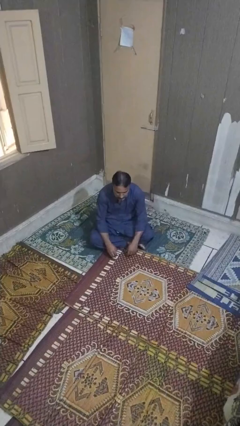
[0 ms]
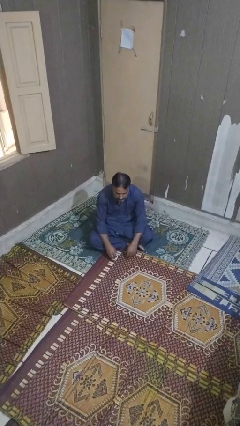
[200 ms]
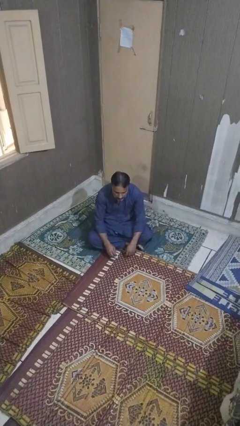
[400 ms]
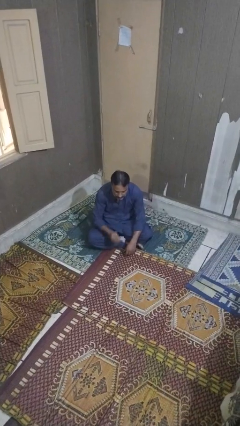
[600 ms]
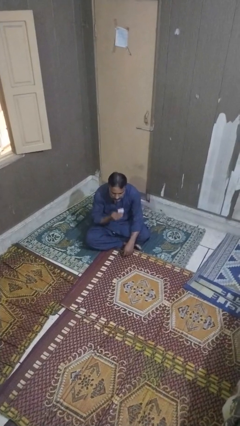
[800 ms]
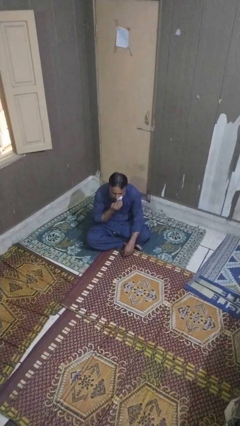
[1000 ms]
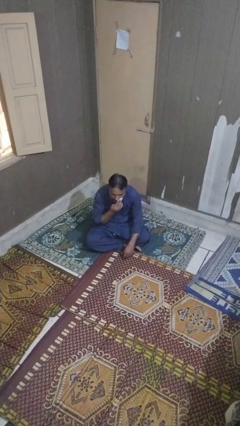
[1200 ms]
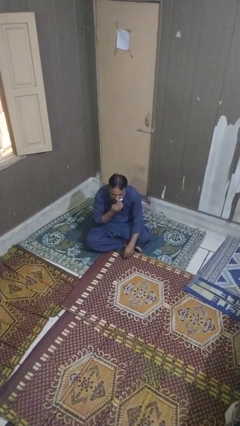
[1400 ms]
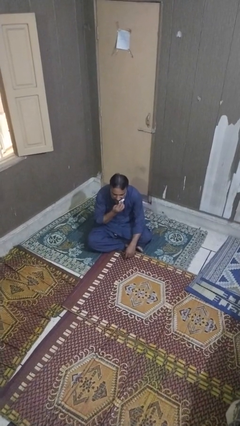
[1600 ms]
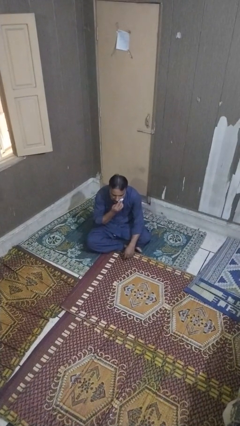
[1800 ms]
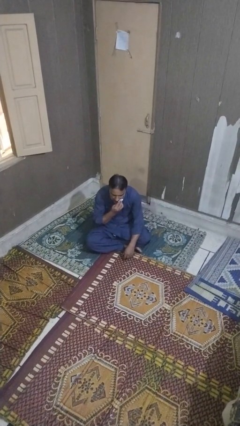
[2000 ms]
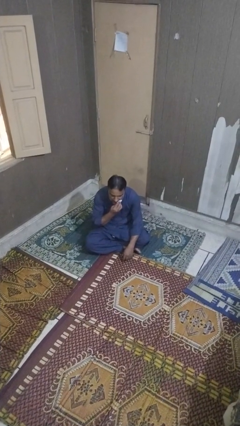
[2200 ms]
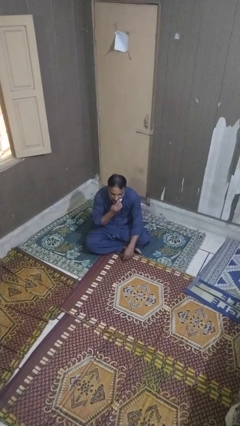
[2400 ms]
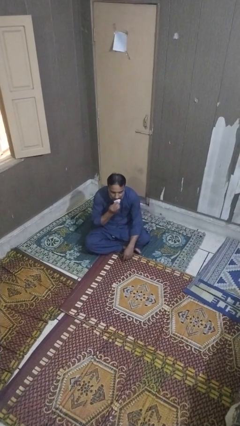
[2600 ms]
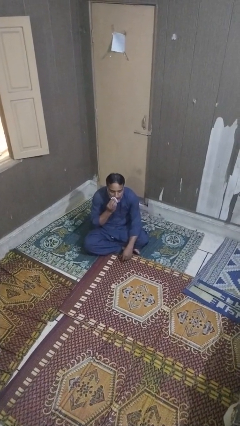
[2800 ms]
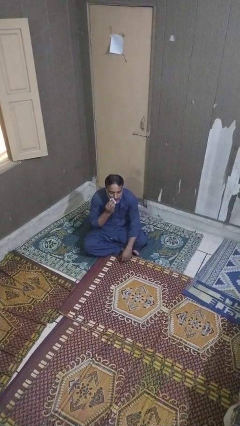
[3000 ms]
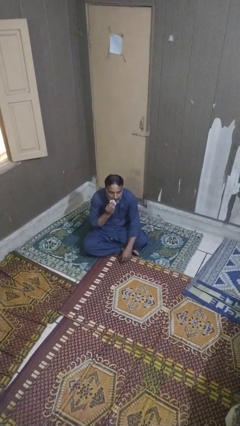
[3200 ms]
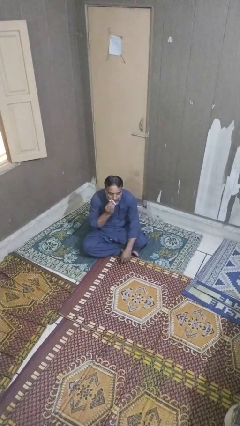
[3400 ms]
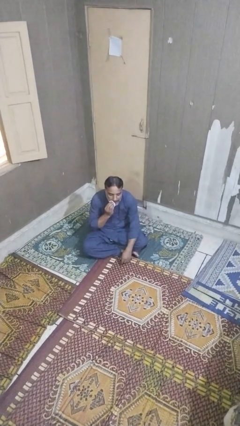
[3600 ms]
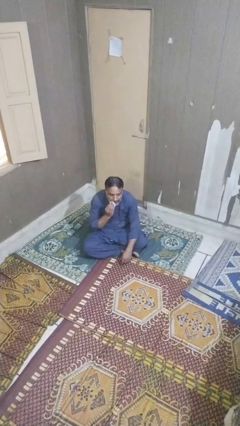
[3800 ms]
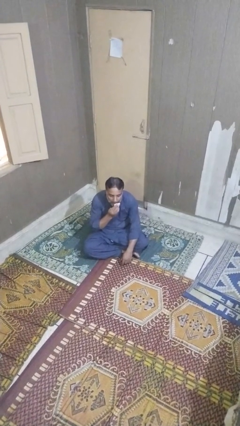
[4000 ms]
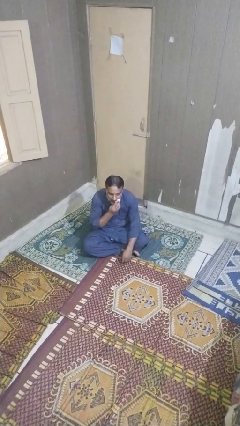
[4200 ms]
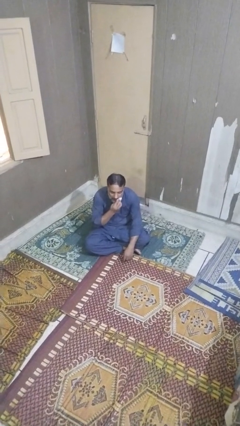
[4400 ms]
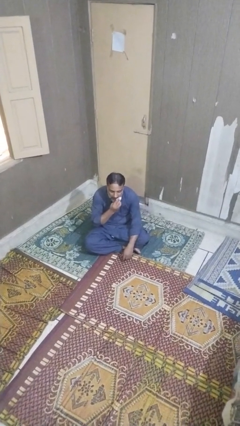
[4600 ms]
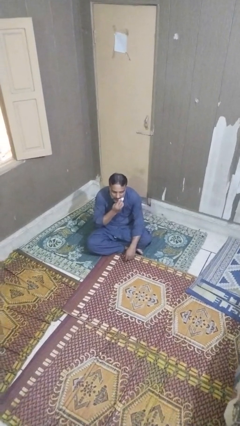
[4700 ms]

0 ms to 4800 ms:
person wipes mouth with napkin

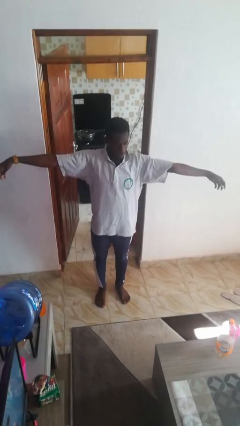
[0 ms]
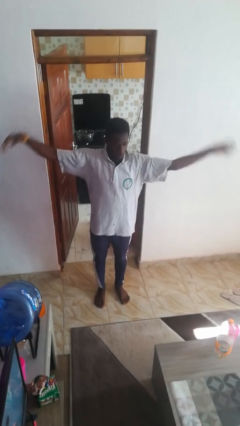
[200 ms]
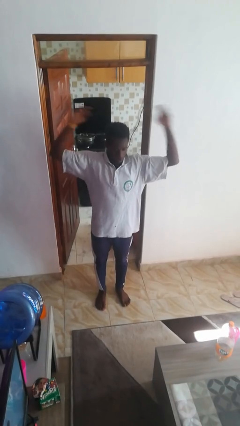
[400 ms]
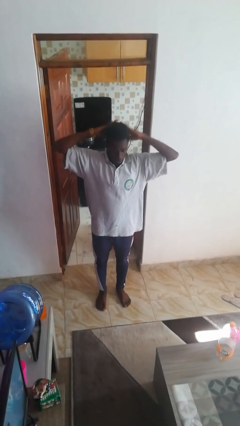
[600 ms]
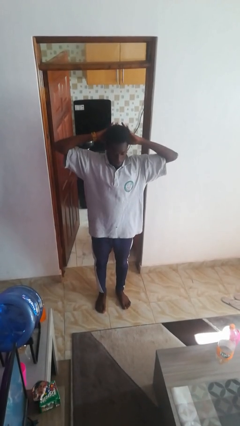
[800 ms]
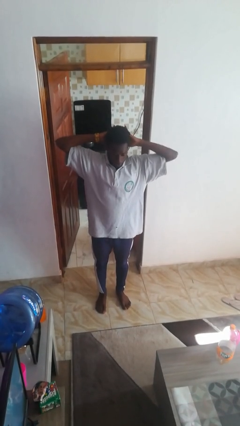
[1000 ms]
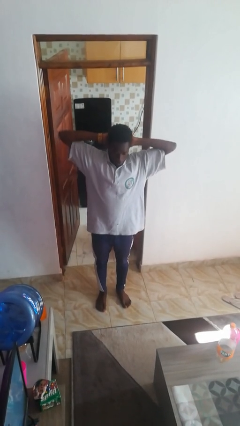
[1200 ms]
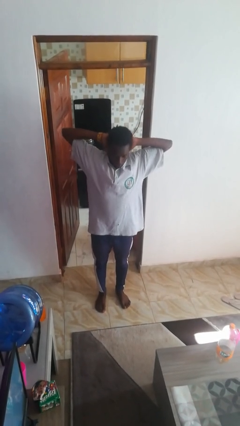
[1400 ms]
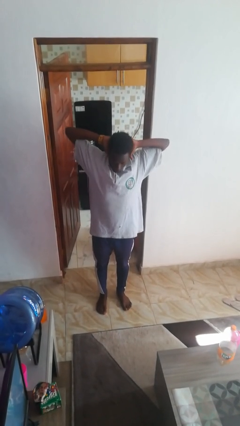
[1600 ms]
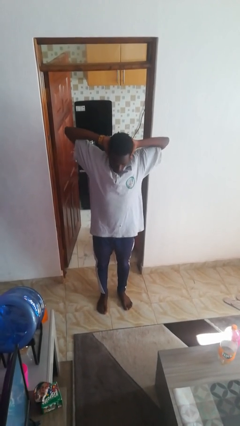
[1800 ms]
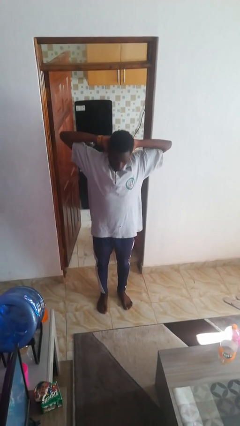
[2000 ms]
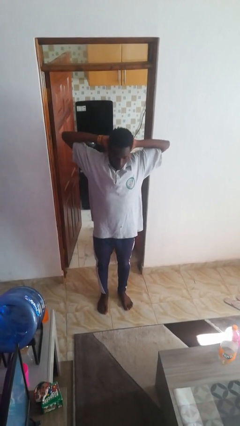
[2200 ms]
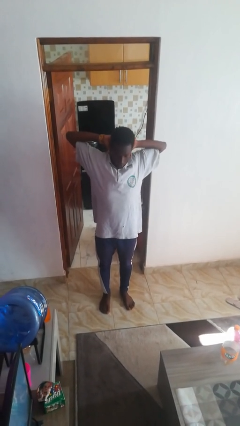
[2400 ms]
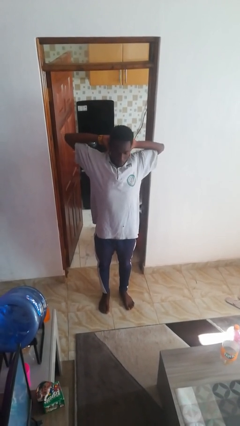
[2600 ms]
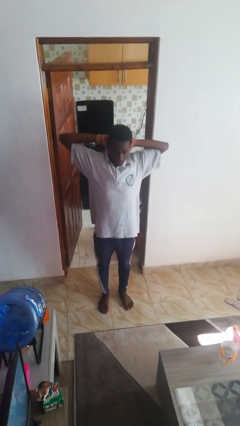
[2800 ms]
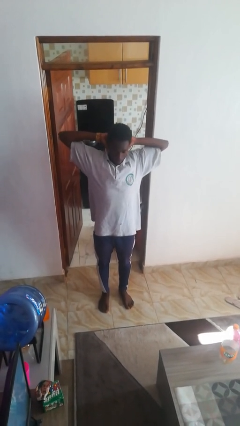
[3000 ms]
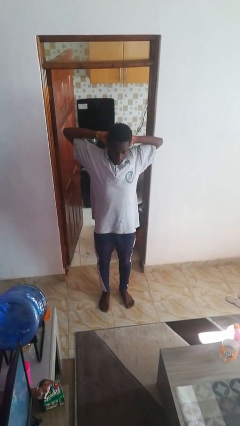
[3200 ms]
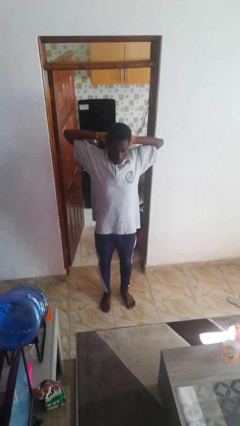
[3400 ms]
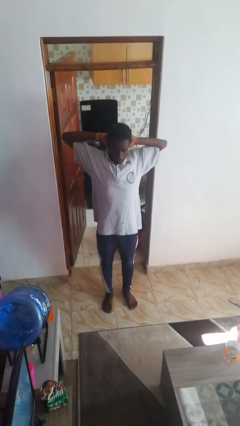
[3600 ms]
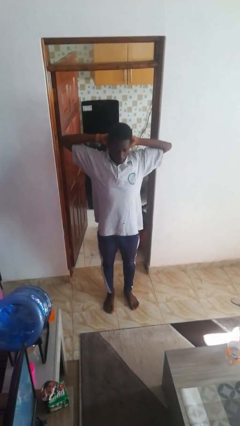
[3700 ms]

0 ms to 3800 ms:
person stretches arms over head

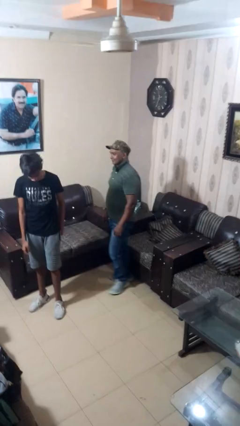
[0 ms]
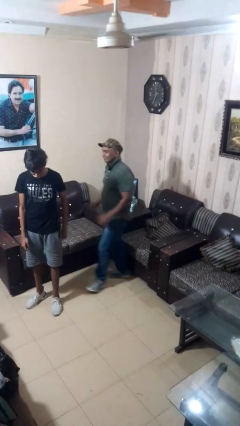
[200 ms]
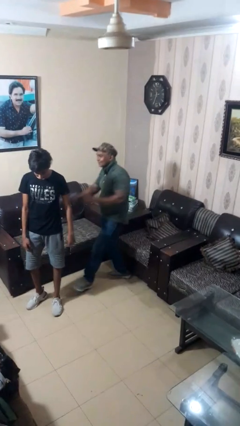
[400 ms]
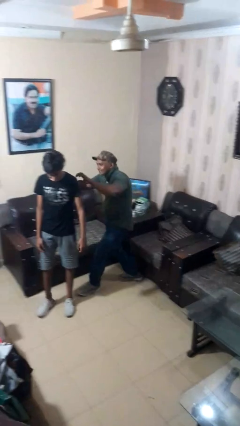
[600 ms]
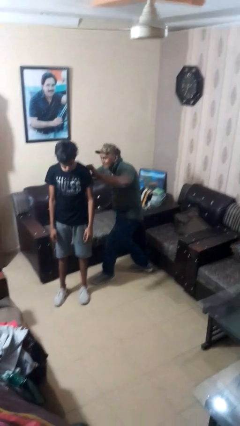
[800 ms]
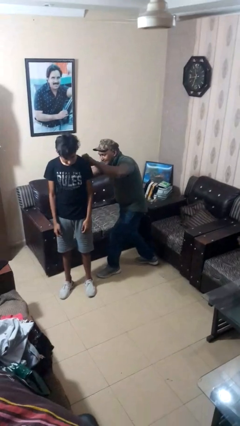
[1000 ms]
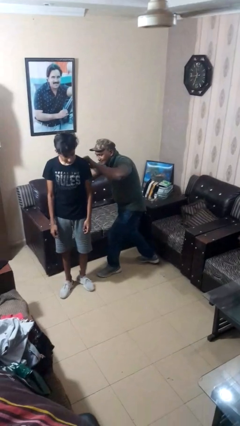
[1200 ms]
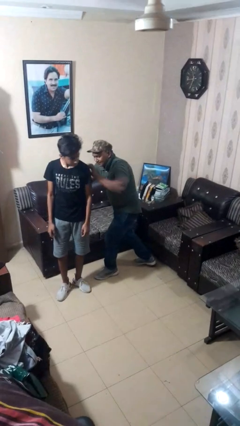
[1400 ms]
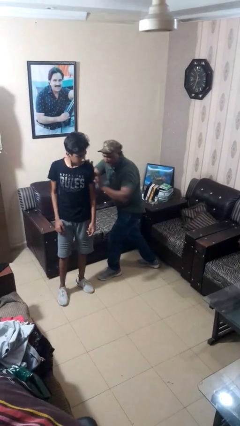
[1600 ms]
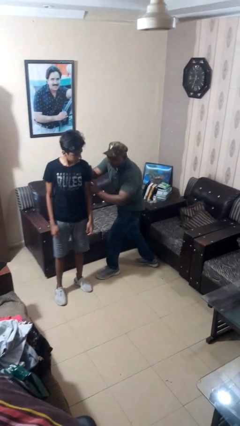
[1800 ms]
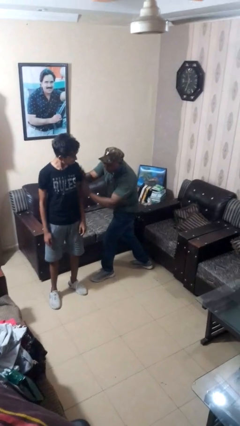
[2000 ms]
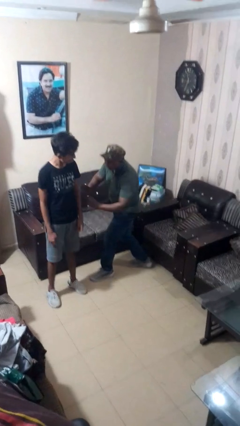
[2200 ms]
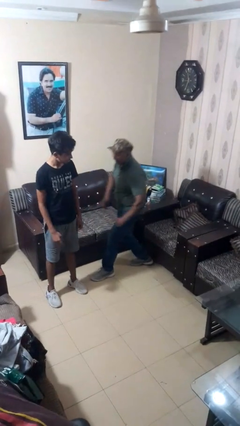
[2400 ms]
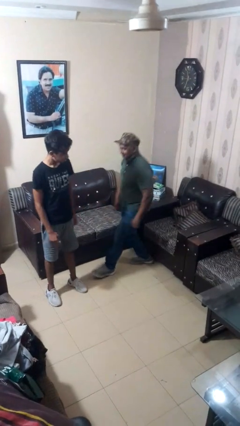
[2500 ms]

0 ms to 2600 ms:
person tickles person

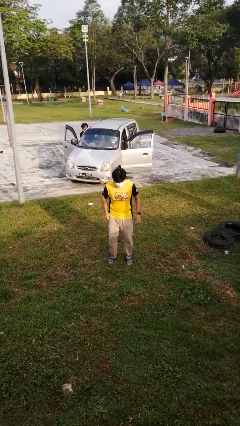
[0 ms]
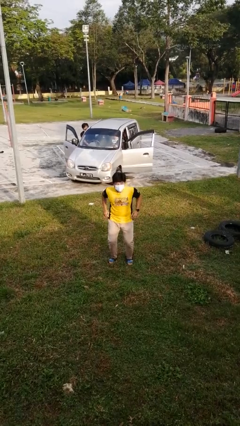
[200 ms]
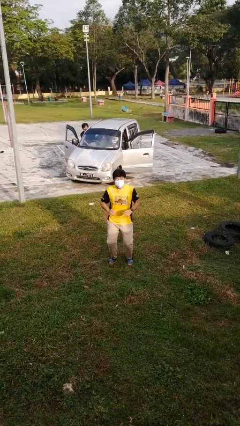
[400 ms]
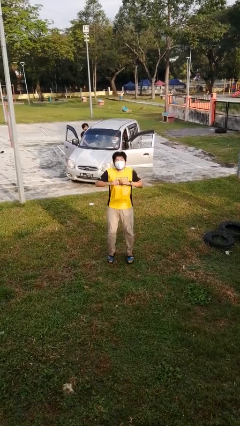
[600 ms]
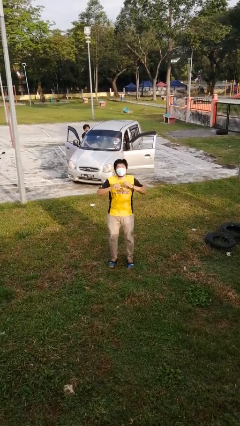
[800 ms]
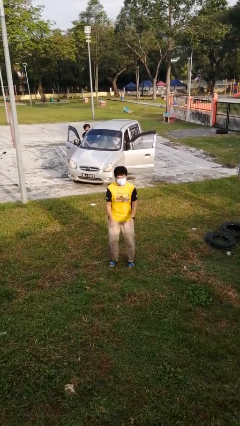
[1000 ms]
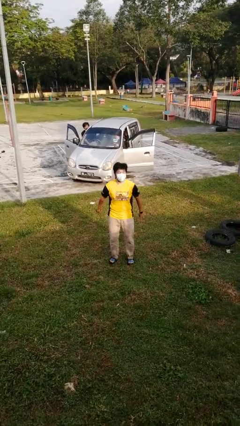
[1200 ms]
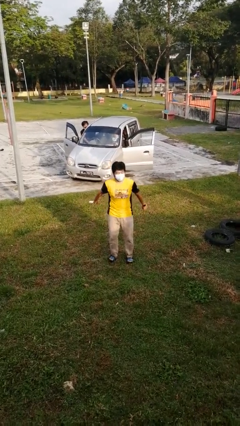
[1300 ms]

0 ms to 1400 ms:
person jumps

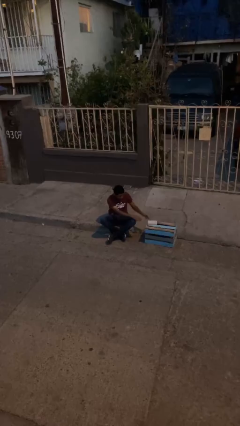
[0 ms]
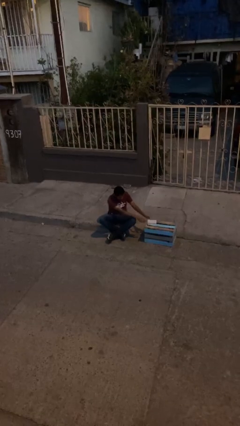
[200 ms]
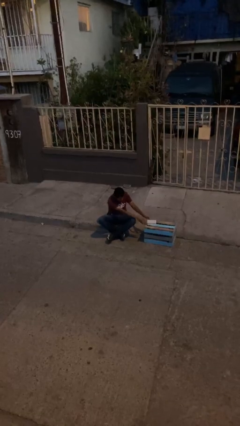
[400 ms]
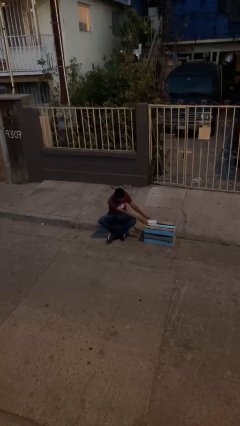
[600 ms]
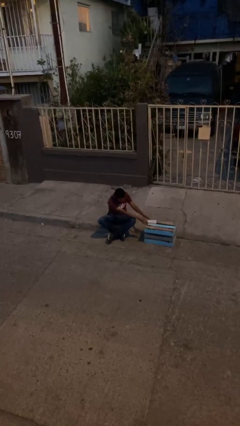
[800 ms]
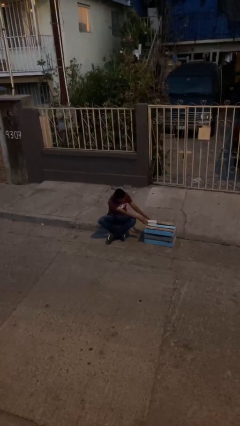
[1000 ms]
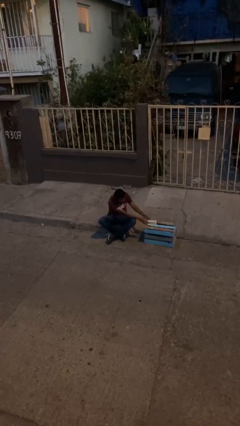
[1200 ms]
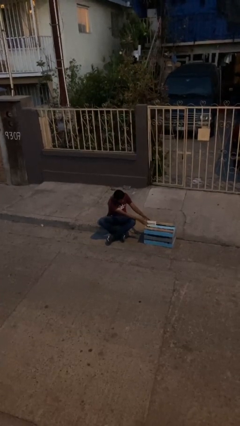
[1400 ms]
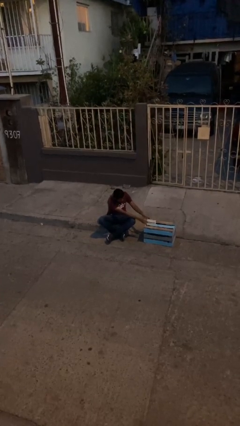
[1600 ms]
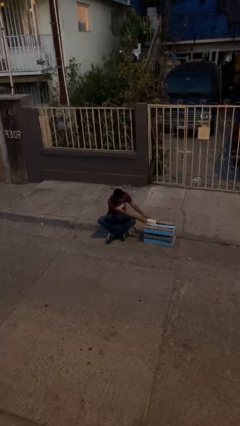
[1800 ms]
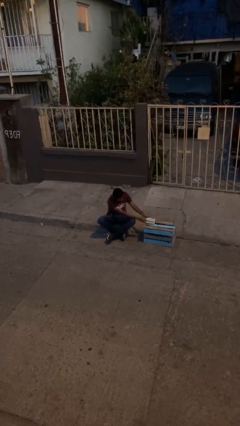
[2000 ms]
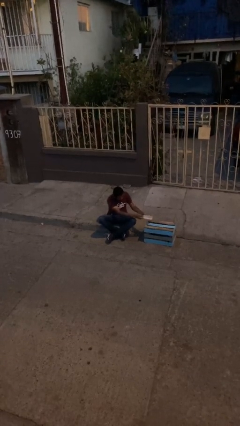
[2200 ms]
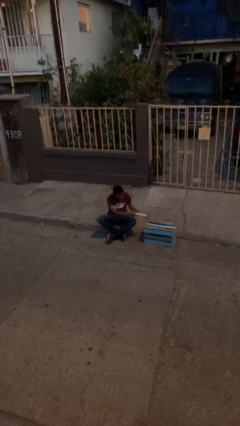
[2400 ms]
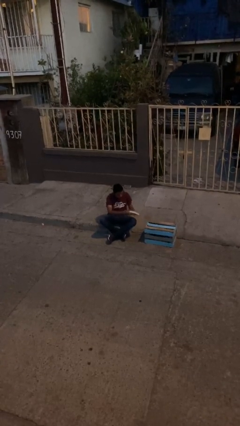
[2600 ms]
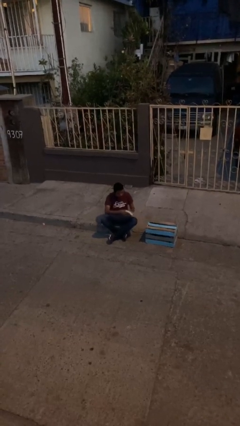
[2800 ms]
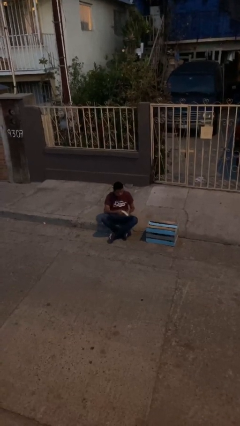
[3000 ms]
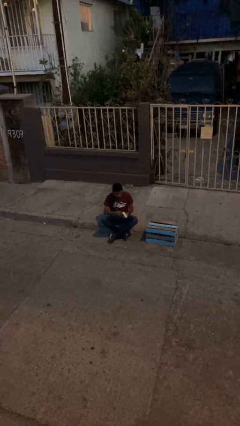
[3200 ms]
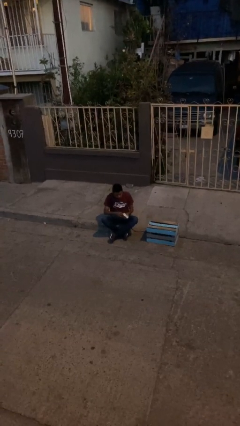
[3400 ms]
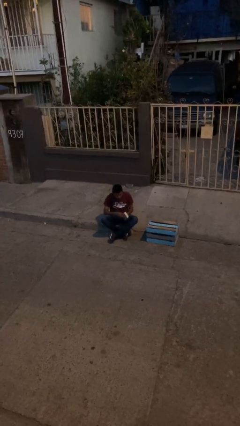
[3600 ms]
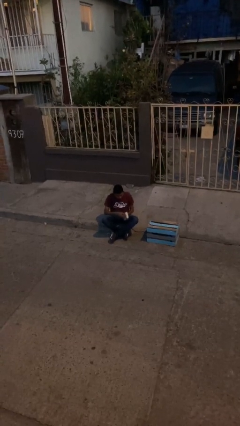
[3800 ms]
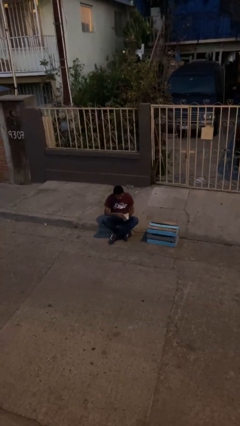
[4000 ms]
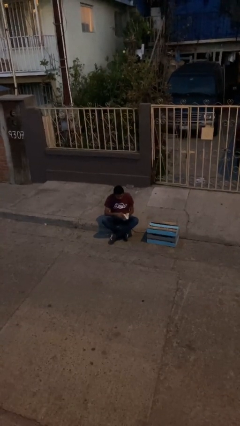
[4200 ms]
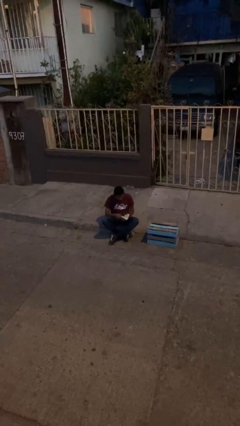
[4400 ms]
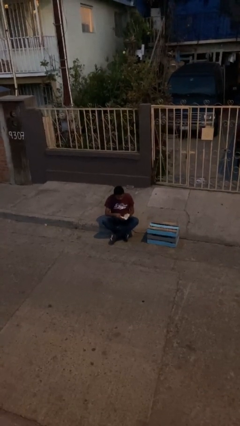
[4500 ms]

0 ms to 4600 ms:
person picks up object from table

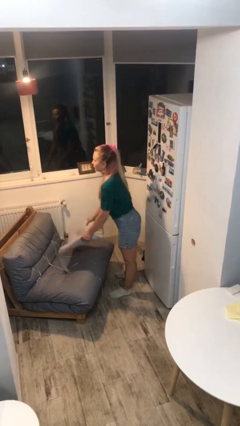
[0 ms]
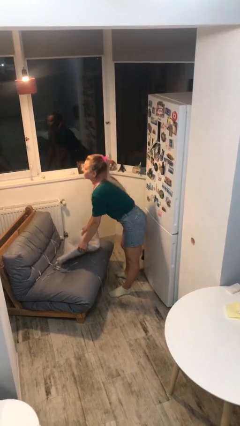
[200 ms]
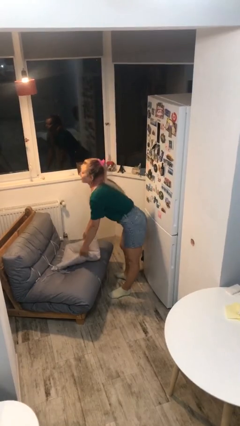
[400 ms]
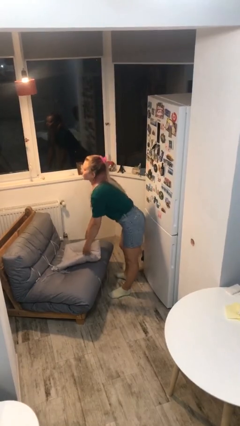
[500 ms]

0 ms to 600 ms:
person puts down object on couch
